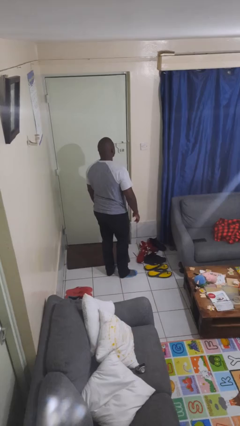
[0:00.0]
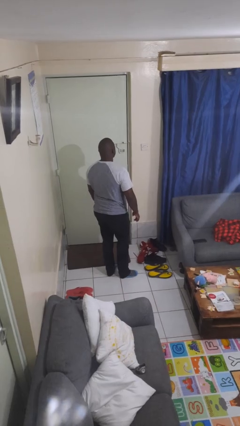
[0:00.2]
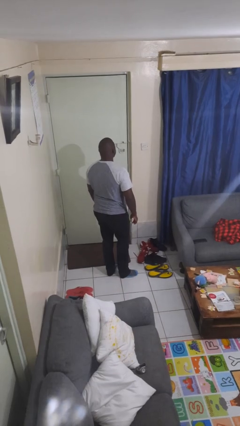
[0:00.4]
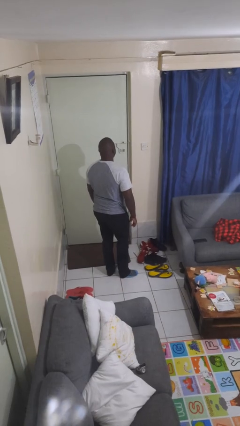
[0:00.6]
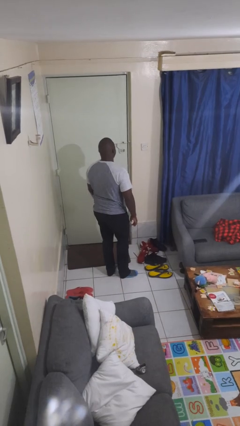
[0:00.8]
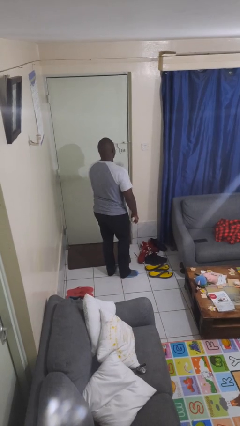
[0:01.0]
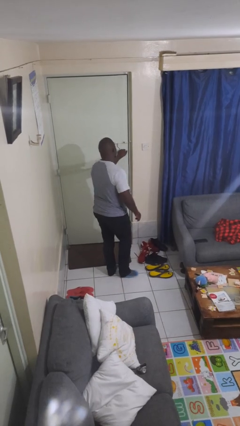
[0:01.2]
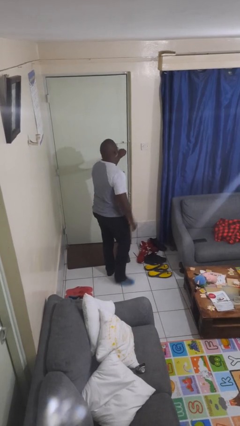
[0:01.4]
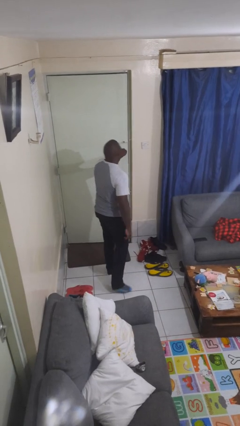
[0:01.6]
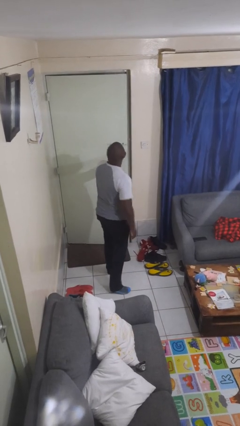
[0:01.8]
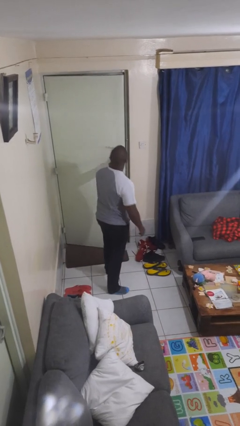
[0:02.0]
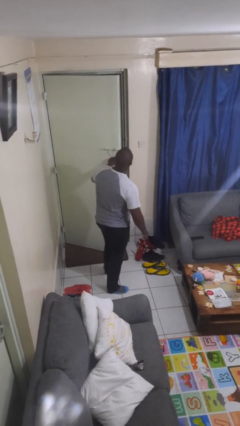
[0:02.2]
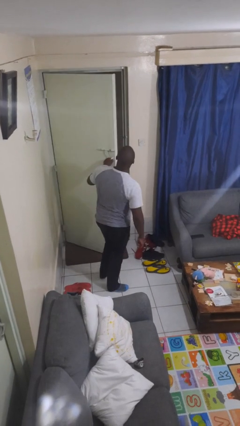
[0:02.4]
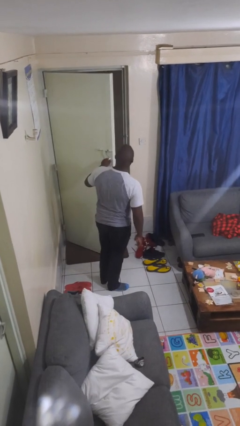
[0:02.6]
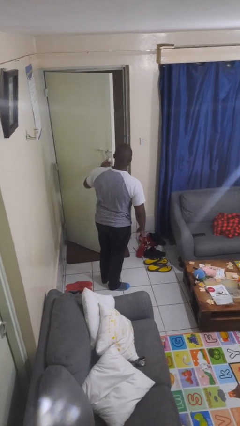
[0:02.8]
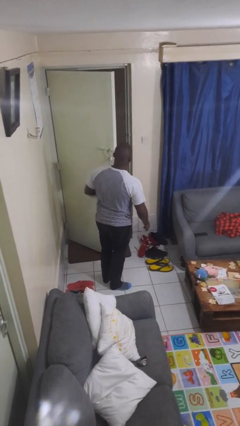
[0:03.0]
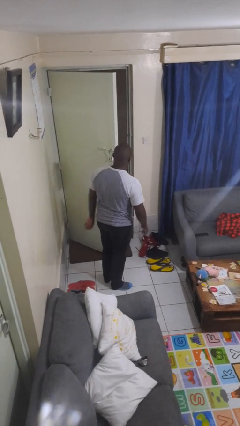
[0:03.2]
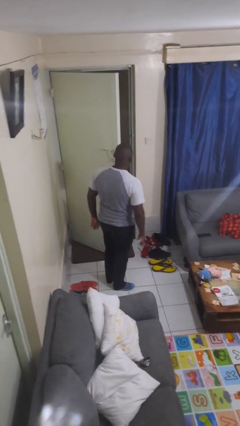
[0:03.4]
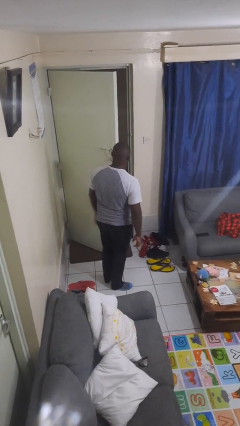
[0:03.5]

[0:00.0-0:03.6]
person opens facility door

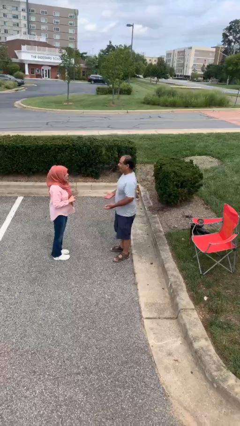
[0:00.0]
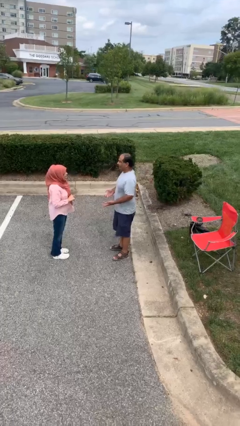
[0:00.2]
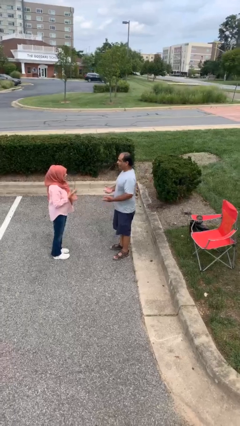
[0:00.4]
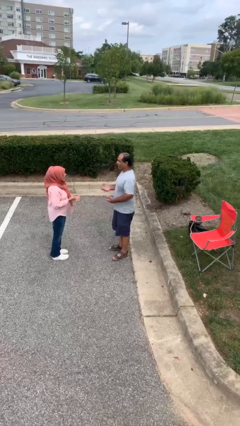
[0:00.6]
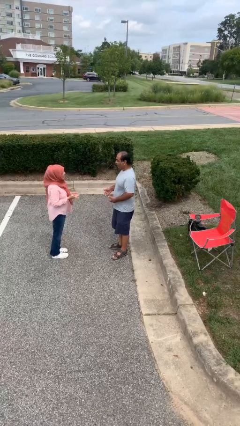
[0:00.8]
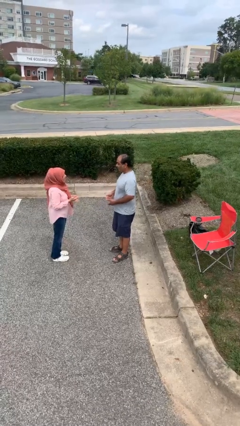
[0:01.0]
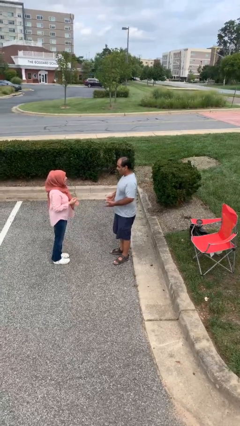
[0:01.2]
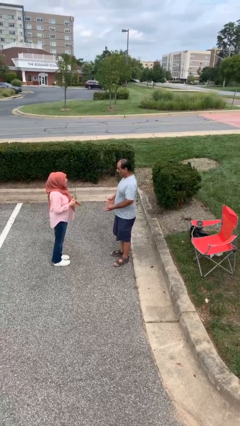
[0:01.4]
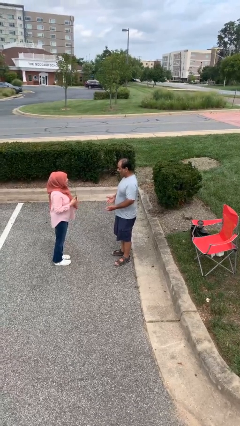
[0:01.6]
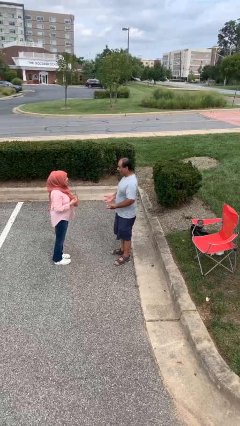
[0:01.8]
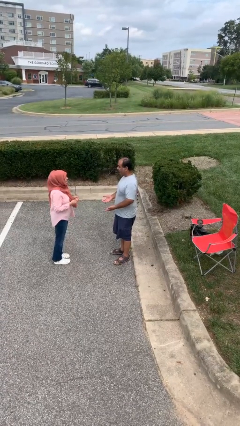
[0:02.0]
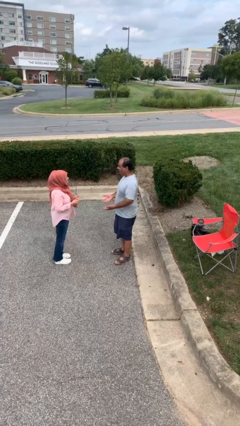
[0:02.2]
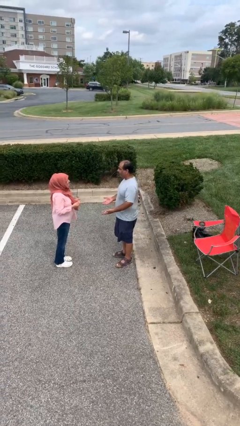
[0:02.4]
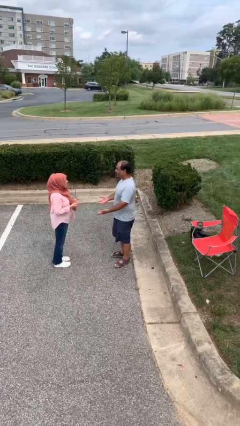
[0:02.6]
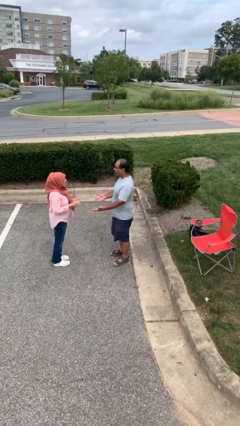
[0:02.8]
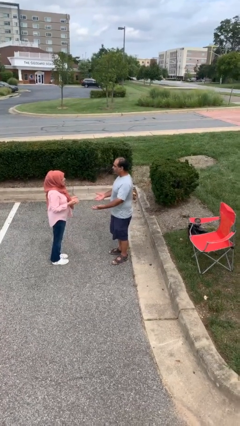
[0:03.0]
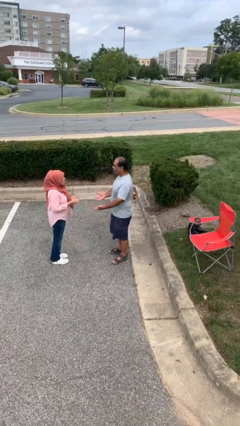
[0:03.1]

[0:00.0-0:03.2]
person talks to person

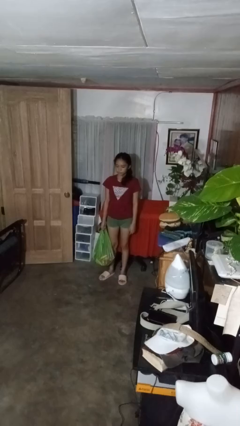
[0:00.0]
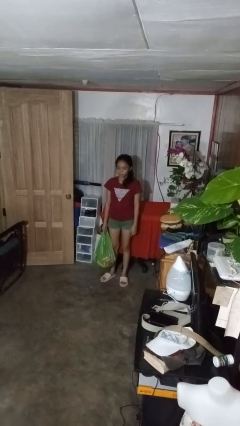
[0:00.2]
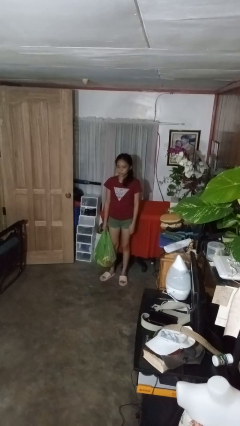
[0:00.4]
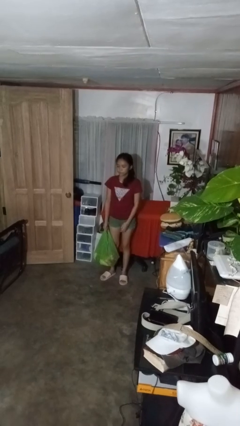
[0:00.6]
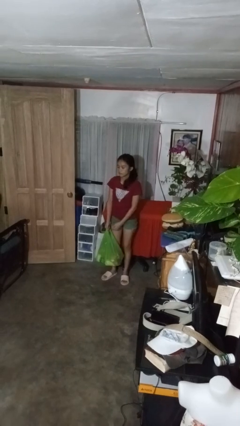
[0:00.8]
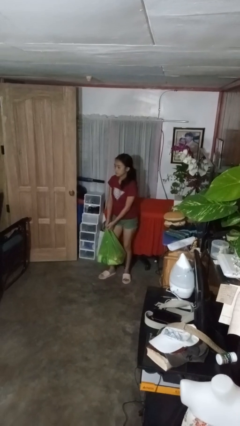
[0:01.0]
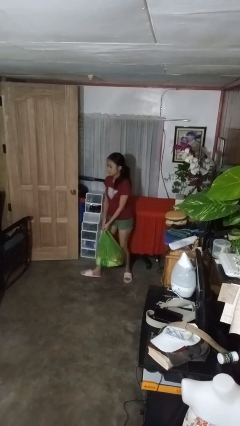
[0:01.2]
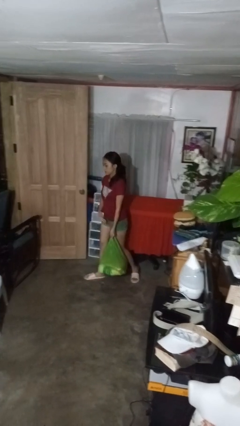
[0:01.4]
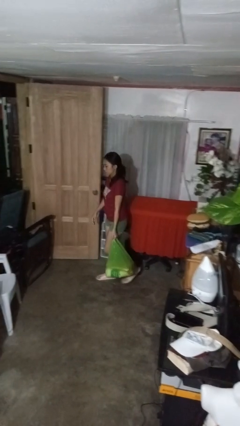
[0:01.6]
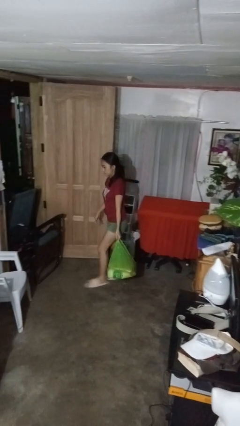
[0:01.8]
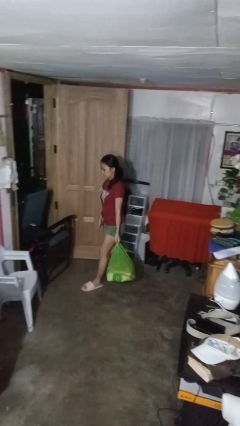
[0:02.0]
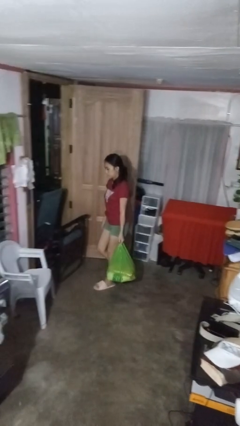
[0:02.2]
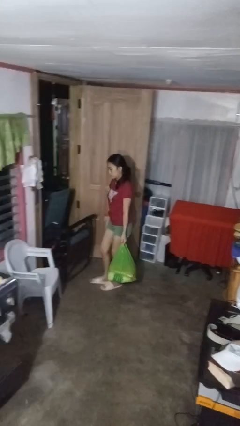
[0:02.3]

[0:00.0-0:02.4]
person carries groceries

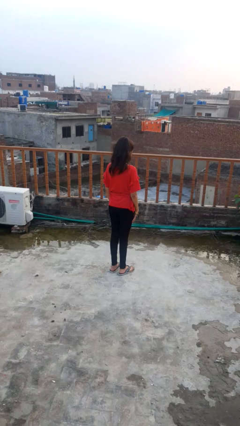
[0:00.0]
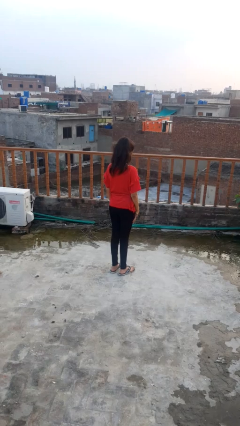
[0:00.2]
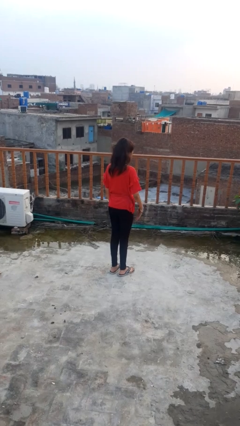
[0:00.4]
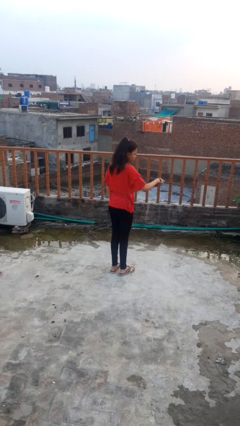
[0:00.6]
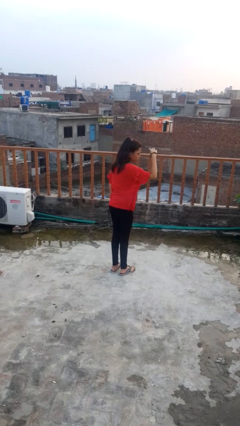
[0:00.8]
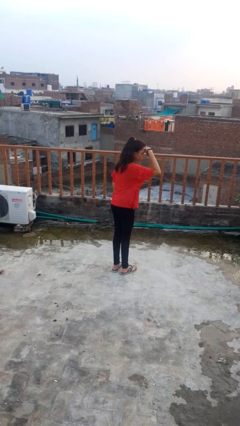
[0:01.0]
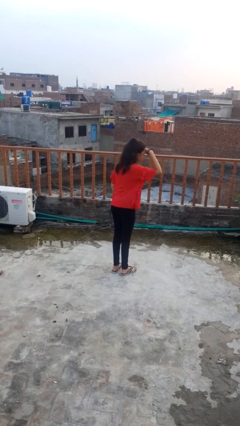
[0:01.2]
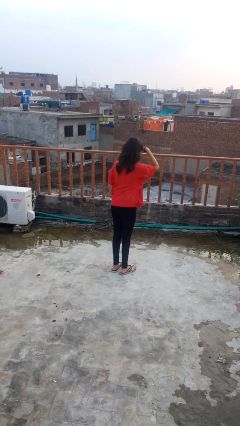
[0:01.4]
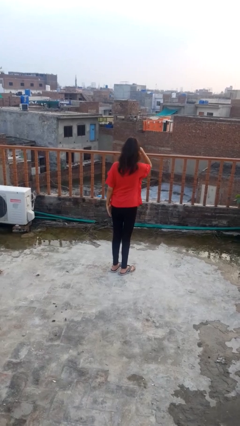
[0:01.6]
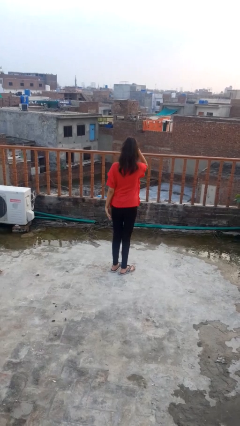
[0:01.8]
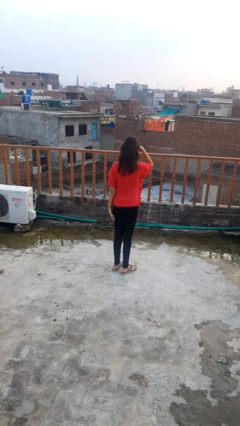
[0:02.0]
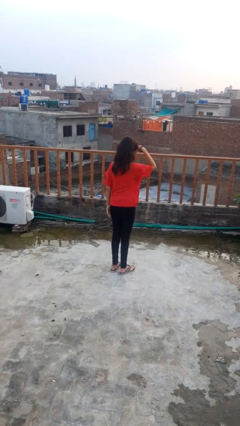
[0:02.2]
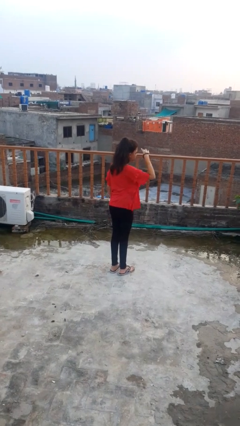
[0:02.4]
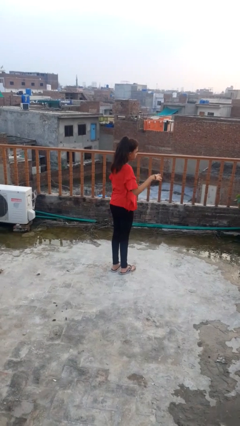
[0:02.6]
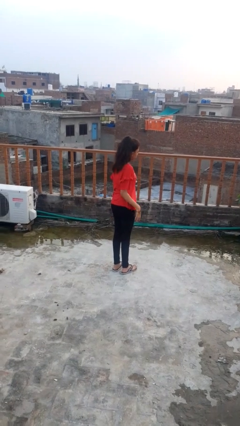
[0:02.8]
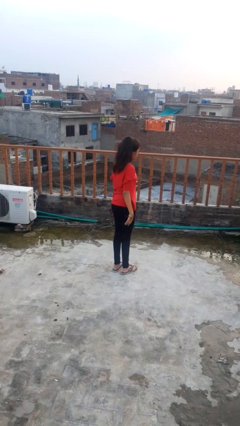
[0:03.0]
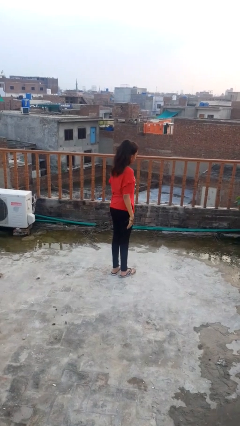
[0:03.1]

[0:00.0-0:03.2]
person shades eyes

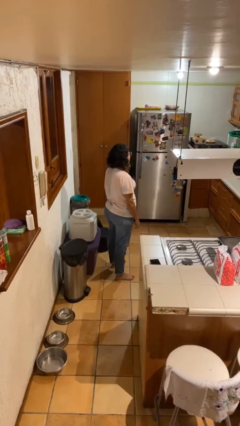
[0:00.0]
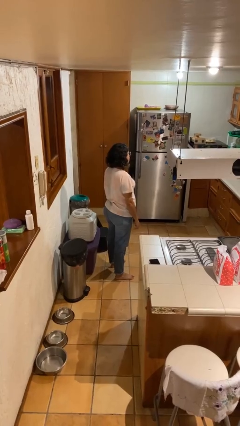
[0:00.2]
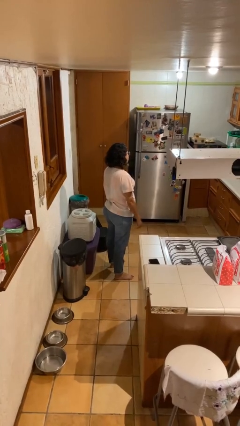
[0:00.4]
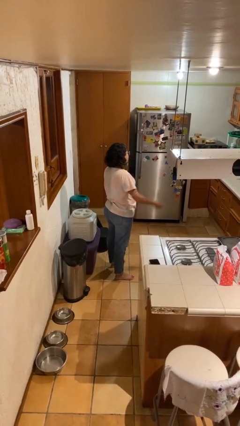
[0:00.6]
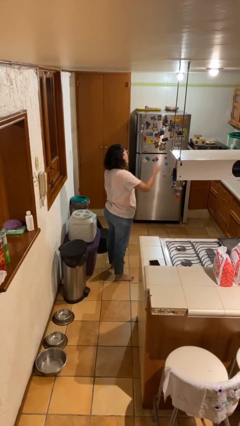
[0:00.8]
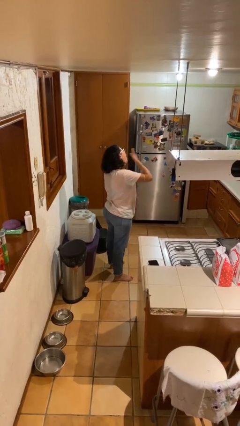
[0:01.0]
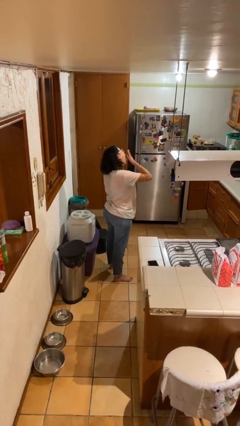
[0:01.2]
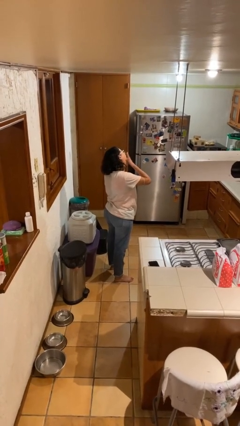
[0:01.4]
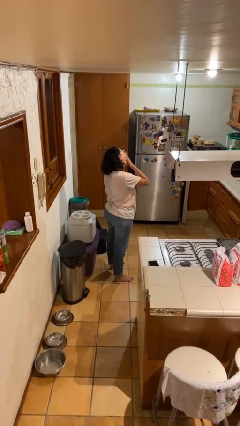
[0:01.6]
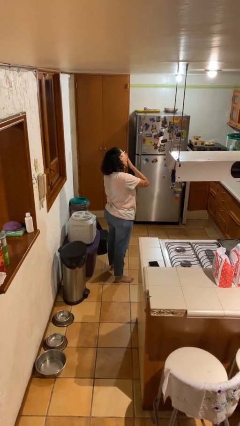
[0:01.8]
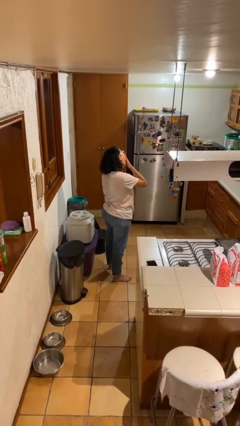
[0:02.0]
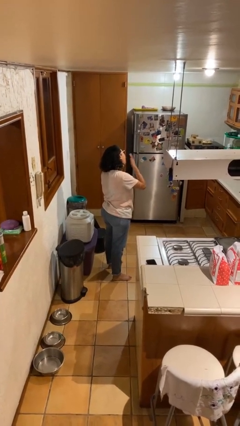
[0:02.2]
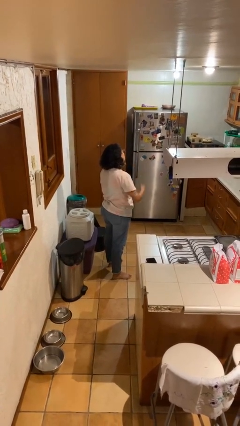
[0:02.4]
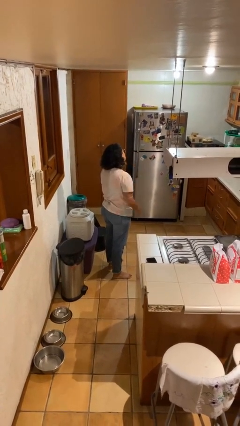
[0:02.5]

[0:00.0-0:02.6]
person yawns

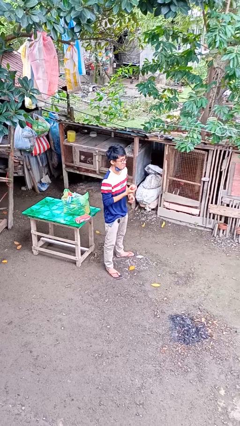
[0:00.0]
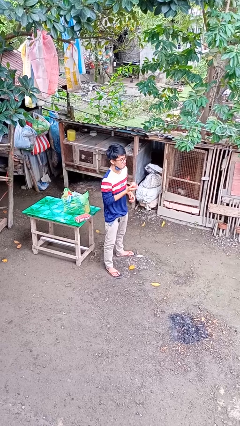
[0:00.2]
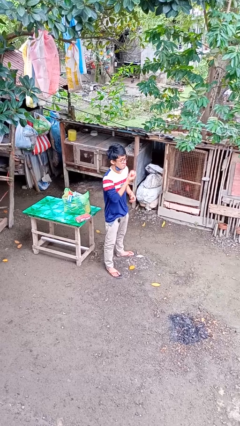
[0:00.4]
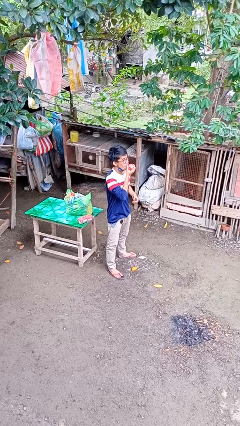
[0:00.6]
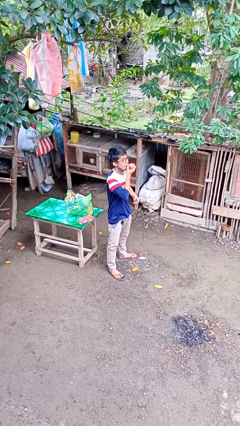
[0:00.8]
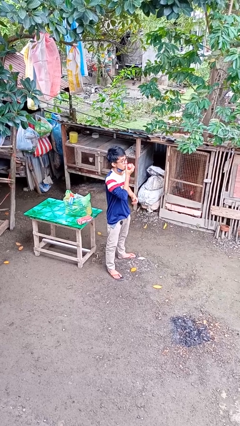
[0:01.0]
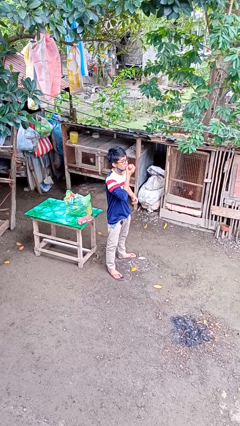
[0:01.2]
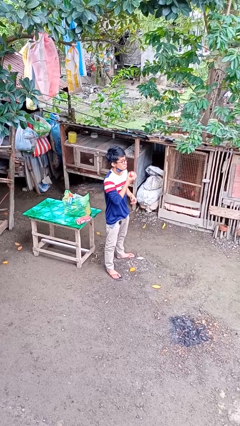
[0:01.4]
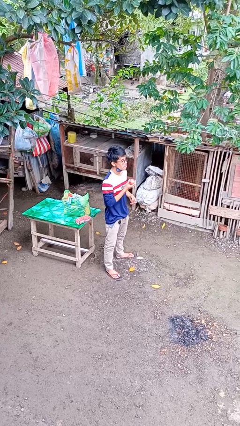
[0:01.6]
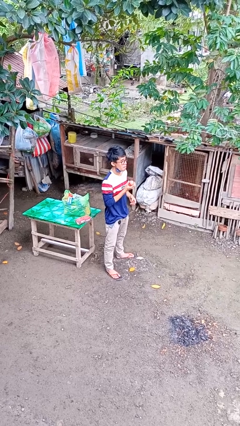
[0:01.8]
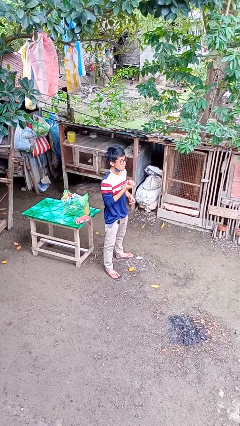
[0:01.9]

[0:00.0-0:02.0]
person eats apple

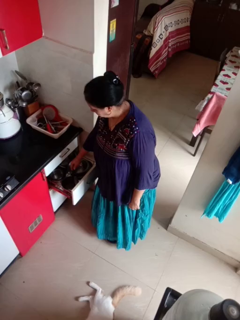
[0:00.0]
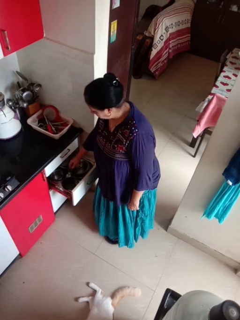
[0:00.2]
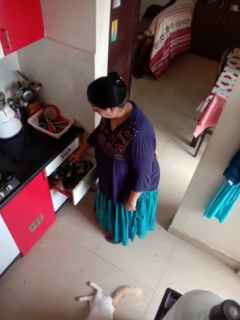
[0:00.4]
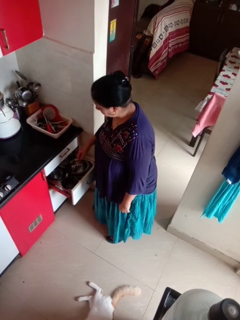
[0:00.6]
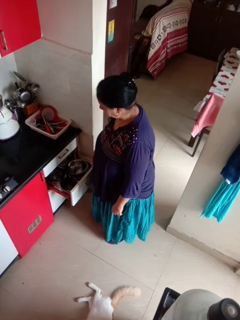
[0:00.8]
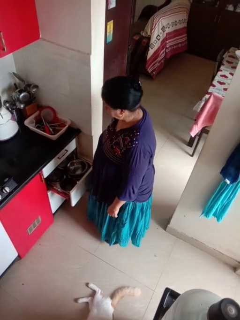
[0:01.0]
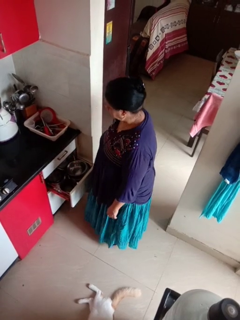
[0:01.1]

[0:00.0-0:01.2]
person puts object into kitchen drawer
